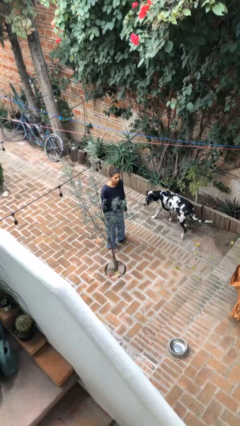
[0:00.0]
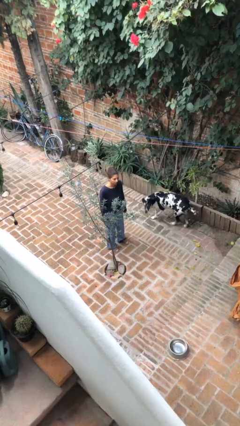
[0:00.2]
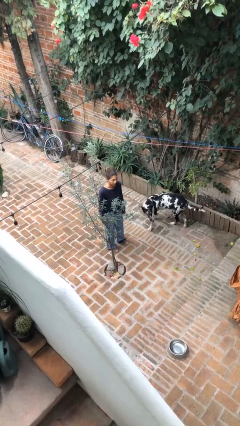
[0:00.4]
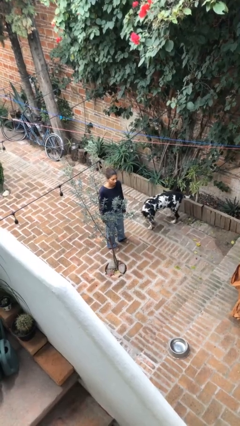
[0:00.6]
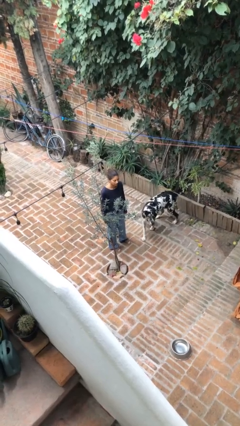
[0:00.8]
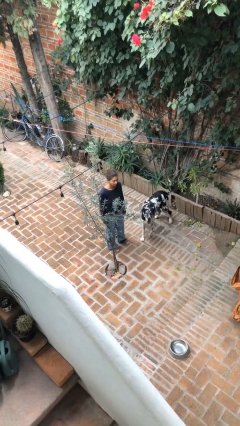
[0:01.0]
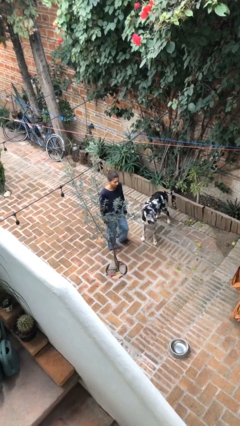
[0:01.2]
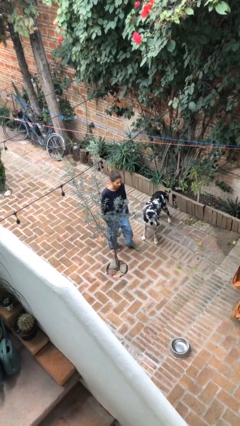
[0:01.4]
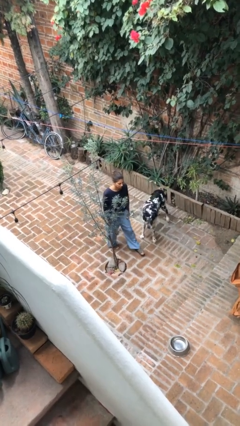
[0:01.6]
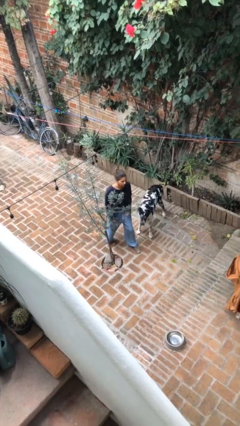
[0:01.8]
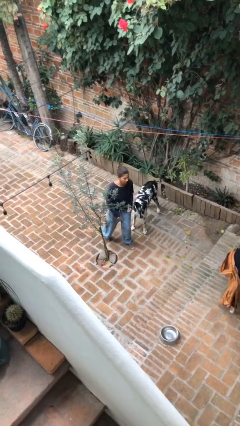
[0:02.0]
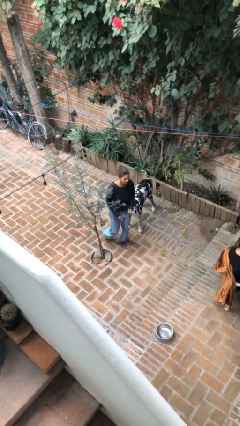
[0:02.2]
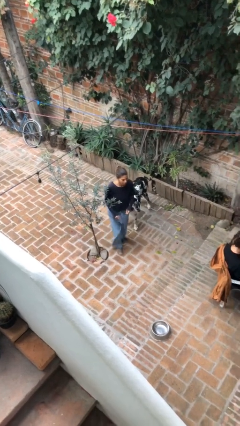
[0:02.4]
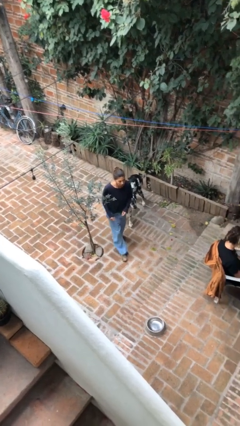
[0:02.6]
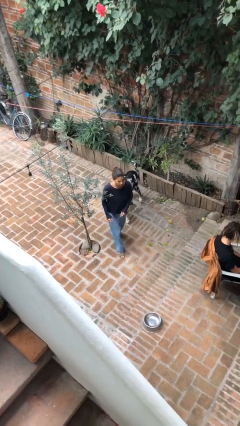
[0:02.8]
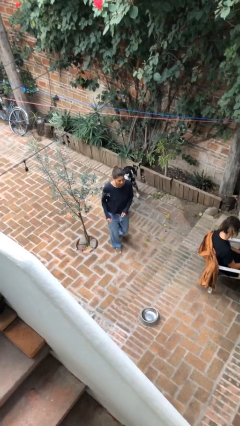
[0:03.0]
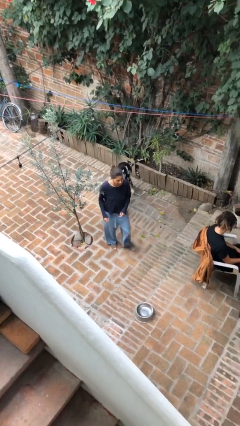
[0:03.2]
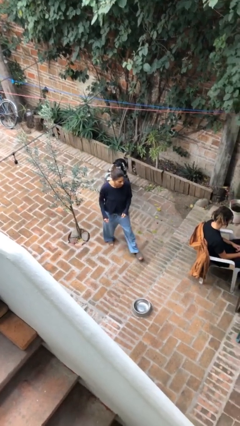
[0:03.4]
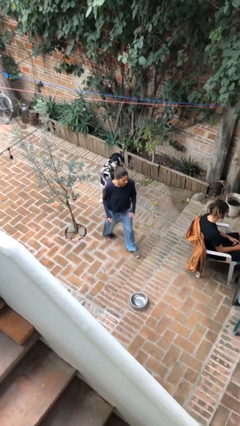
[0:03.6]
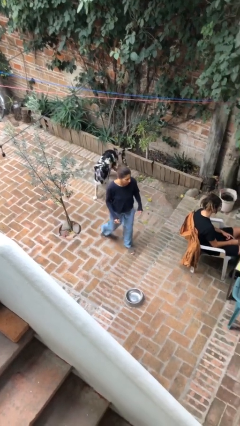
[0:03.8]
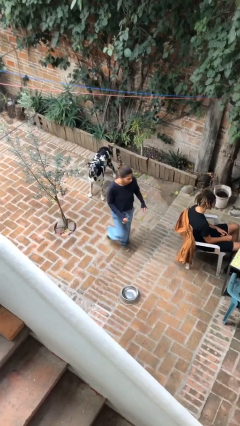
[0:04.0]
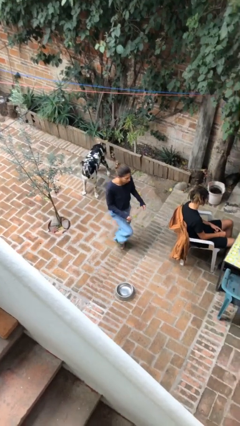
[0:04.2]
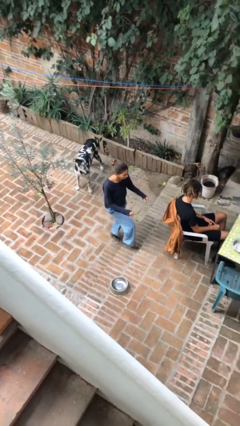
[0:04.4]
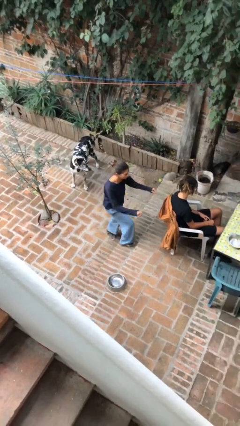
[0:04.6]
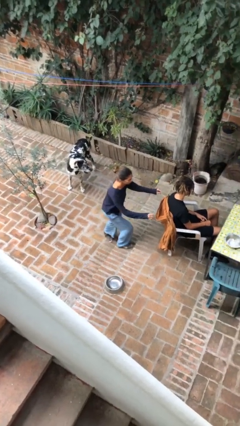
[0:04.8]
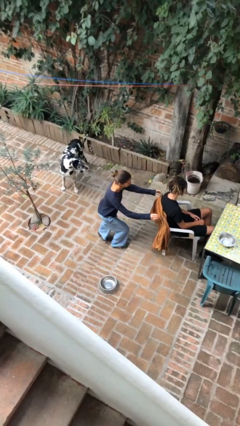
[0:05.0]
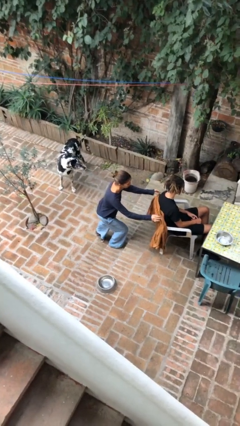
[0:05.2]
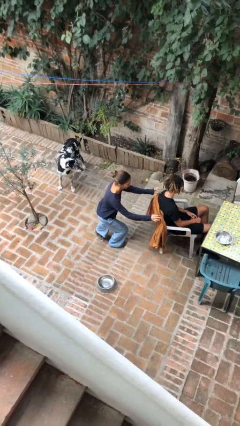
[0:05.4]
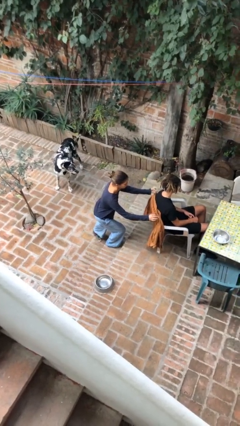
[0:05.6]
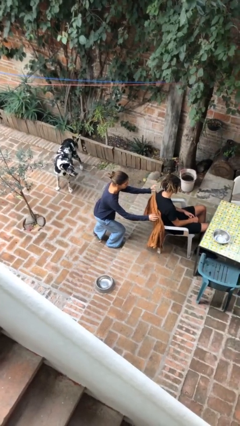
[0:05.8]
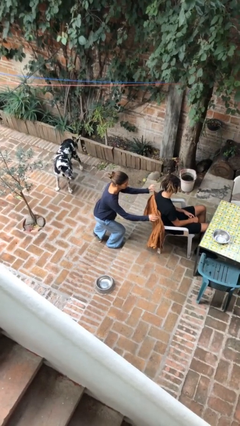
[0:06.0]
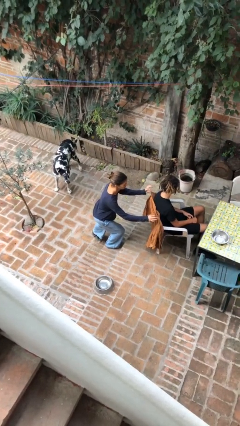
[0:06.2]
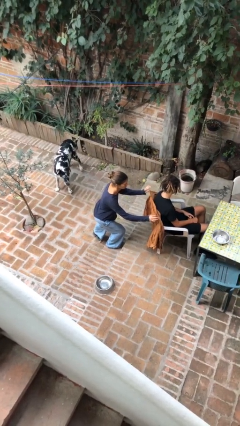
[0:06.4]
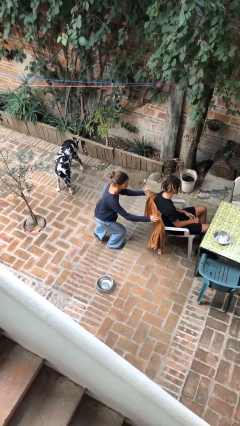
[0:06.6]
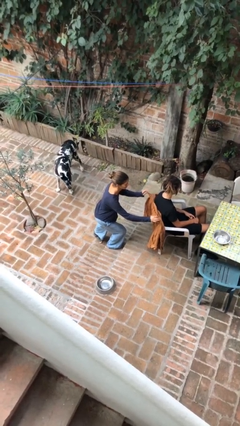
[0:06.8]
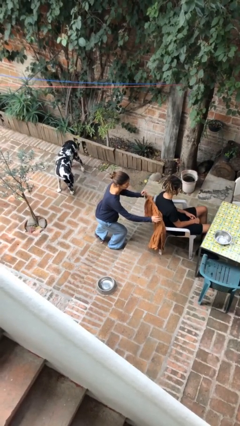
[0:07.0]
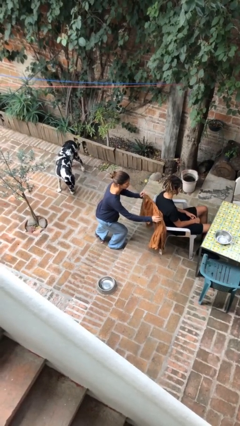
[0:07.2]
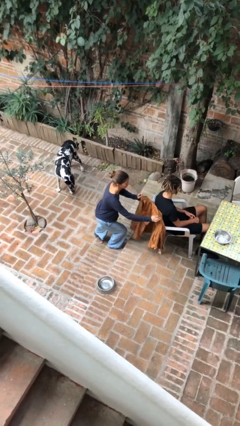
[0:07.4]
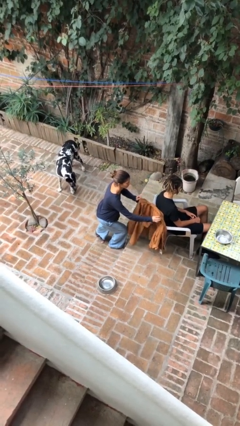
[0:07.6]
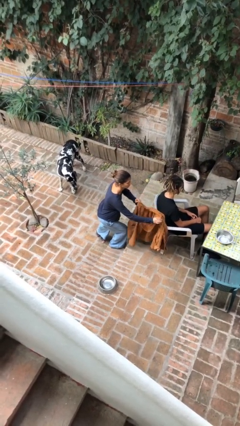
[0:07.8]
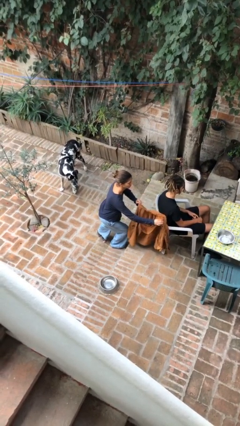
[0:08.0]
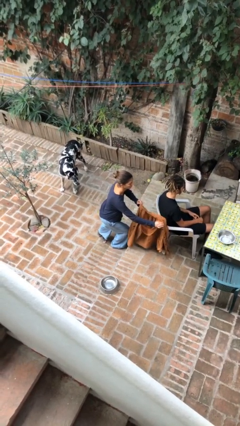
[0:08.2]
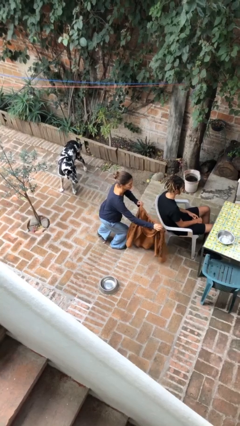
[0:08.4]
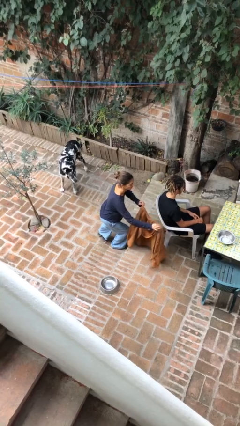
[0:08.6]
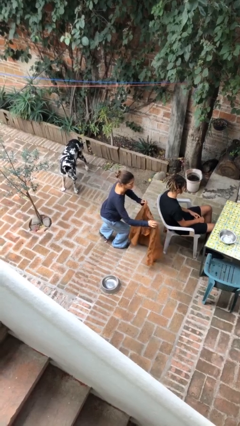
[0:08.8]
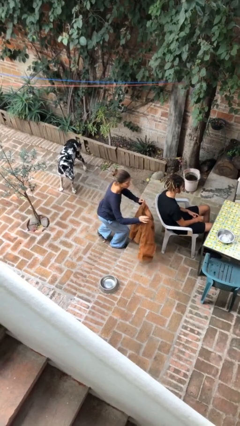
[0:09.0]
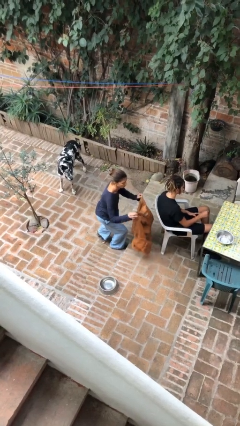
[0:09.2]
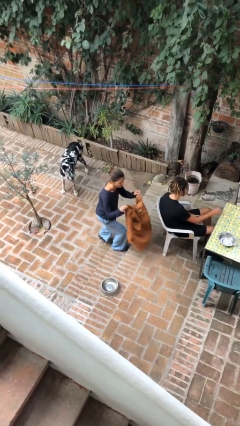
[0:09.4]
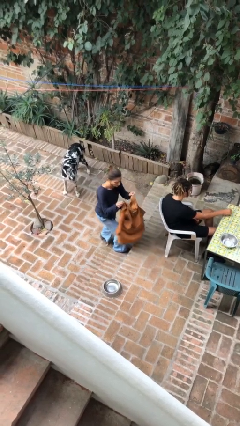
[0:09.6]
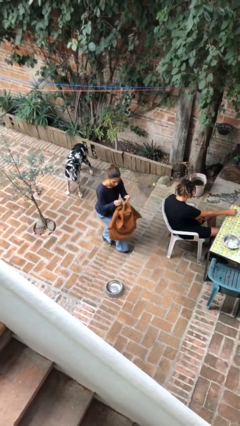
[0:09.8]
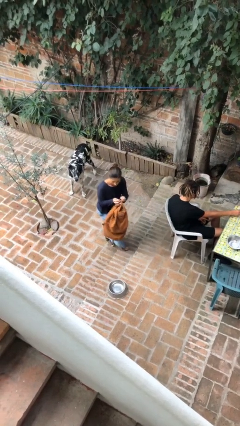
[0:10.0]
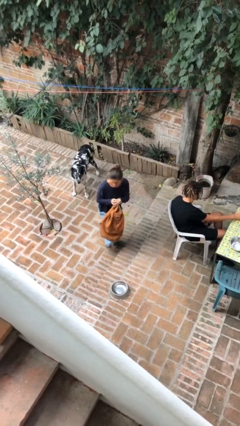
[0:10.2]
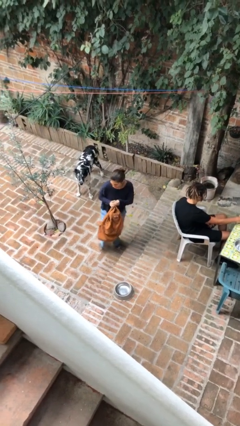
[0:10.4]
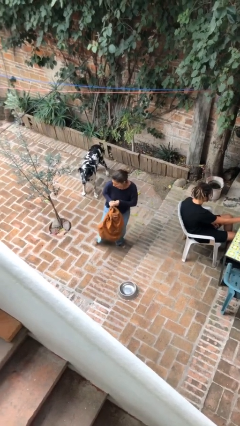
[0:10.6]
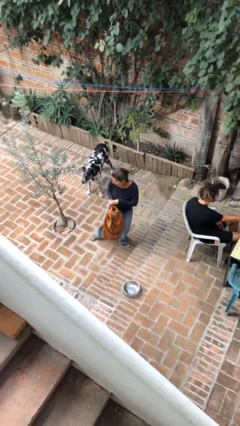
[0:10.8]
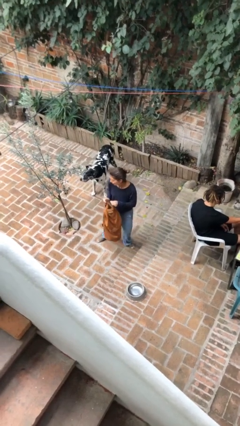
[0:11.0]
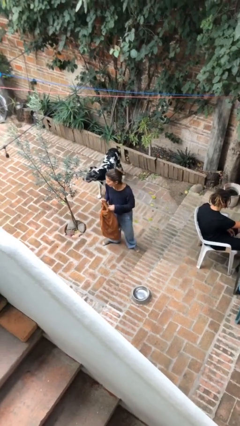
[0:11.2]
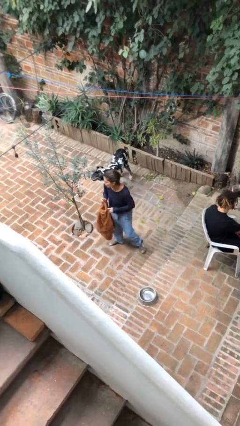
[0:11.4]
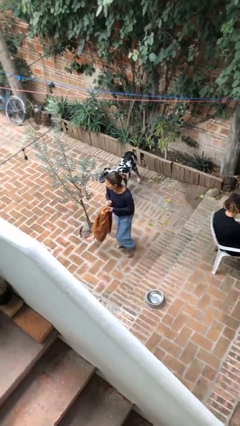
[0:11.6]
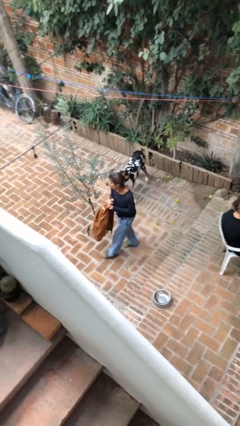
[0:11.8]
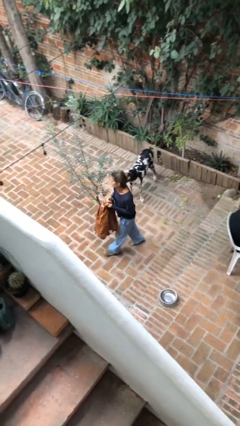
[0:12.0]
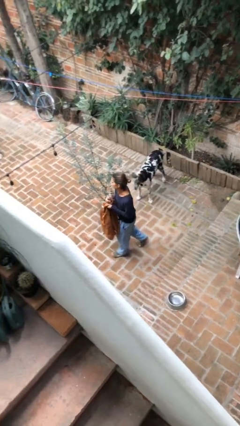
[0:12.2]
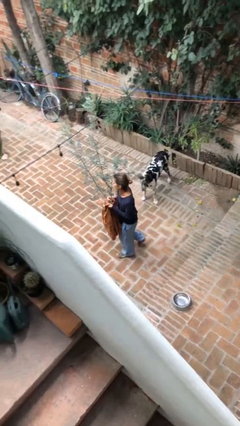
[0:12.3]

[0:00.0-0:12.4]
person steals object from person

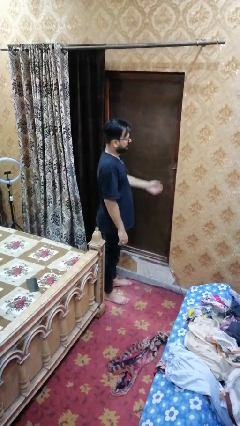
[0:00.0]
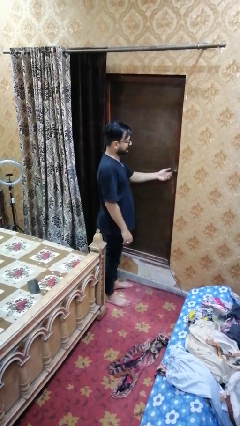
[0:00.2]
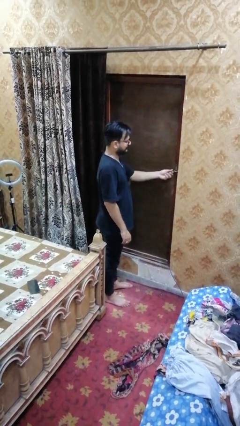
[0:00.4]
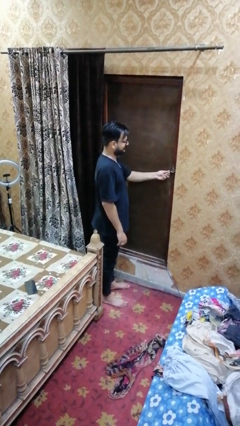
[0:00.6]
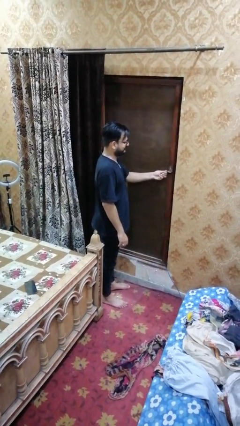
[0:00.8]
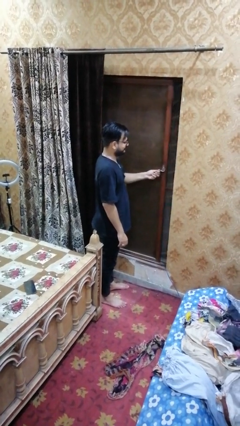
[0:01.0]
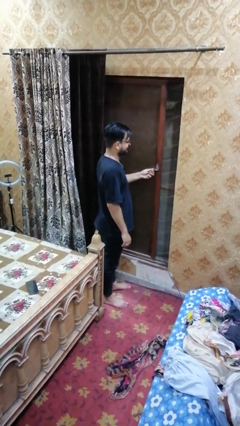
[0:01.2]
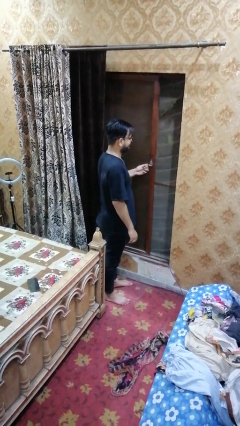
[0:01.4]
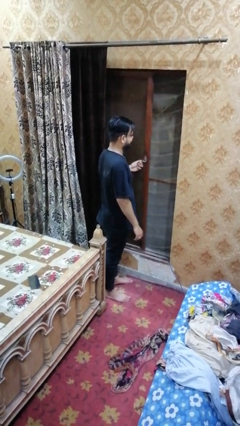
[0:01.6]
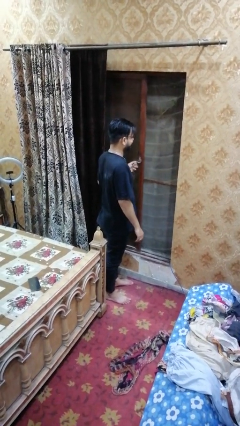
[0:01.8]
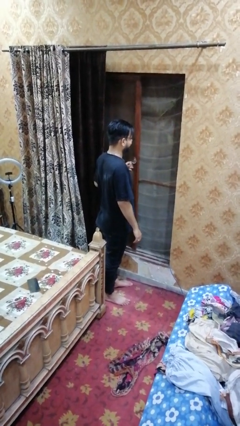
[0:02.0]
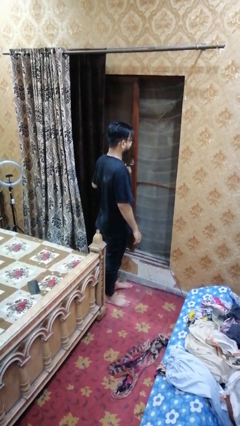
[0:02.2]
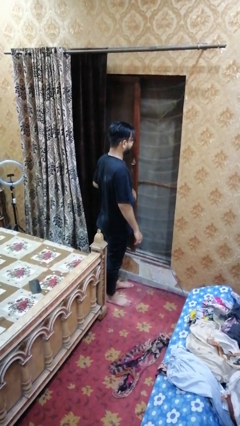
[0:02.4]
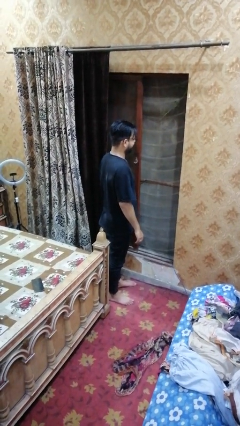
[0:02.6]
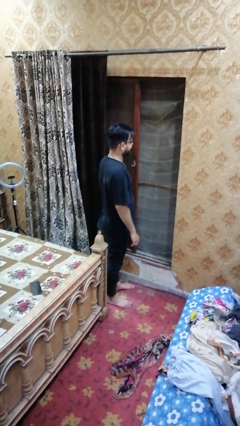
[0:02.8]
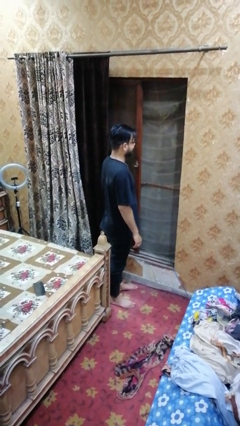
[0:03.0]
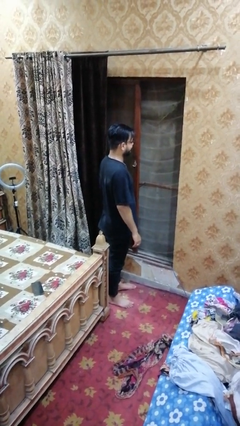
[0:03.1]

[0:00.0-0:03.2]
person opens sliding door

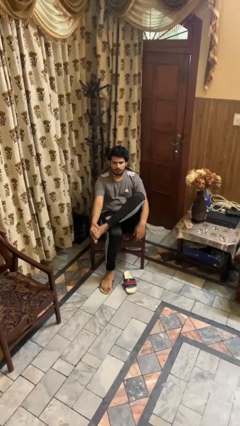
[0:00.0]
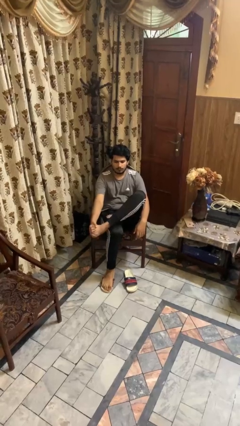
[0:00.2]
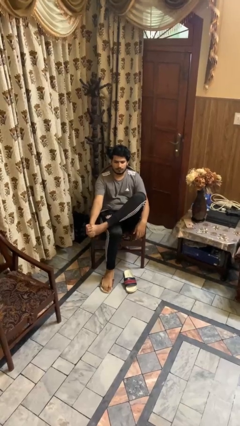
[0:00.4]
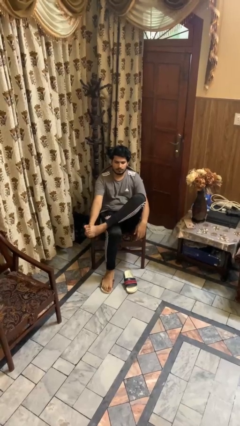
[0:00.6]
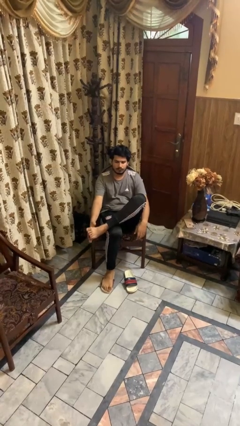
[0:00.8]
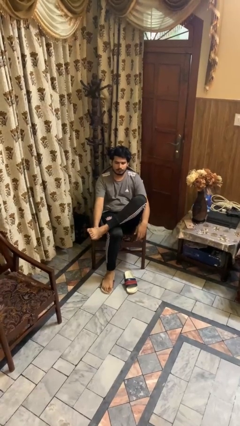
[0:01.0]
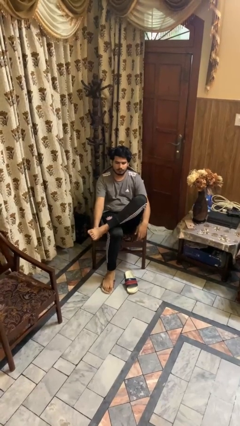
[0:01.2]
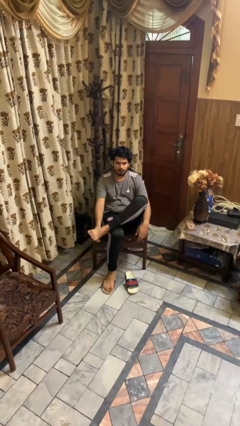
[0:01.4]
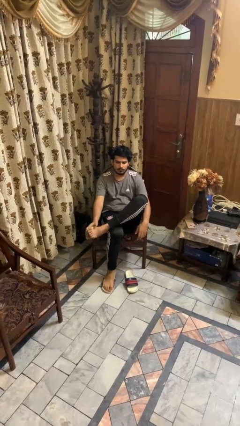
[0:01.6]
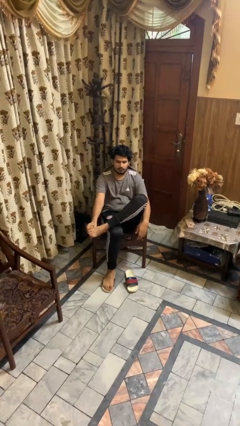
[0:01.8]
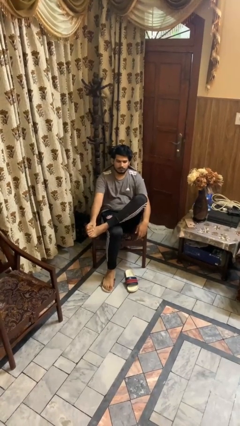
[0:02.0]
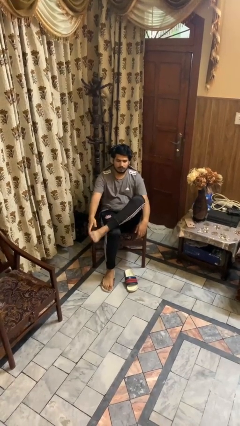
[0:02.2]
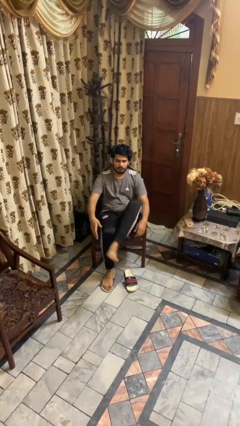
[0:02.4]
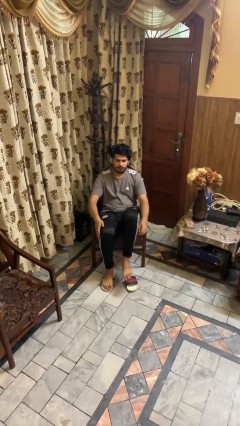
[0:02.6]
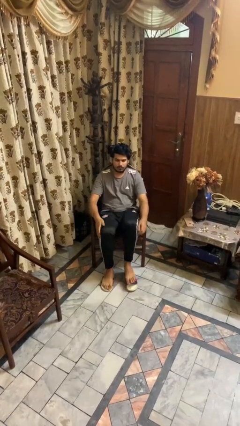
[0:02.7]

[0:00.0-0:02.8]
person rubs foot
